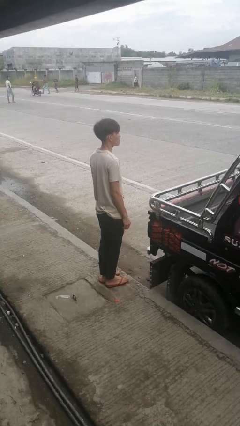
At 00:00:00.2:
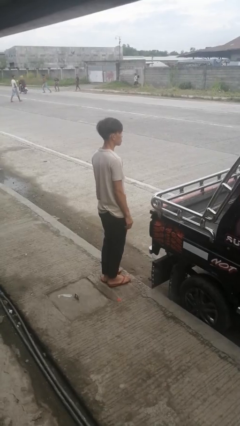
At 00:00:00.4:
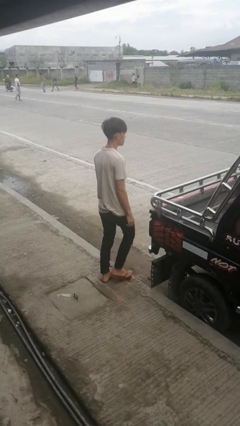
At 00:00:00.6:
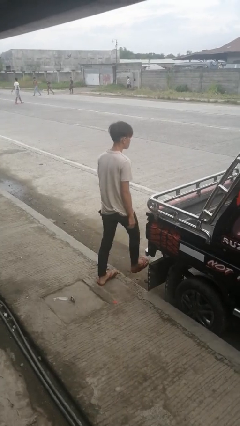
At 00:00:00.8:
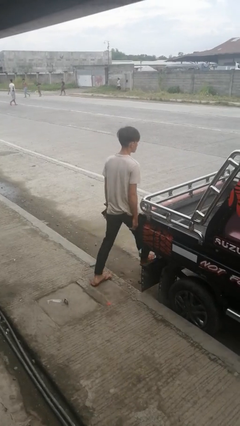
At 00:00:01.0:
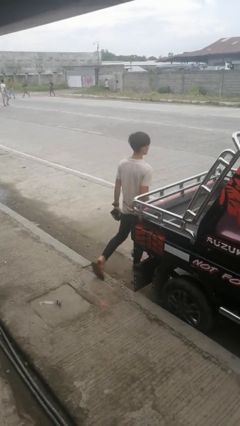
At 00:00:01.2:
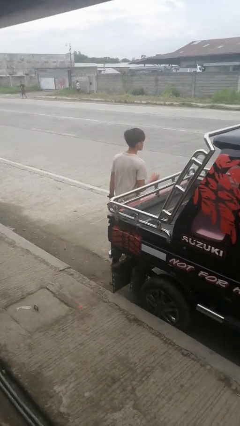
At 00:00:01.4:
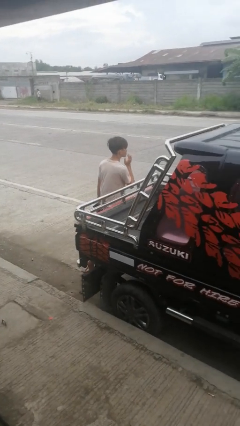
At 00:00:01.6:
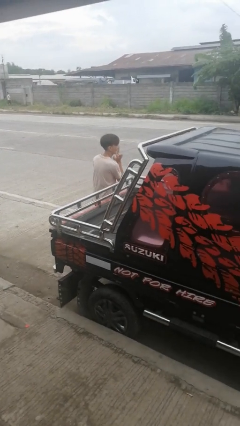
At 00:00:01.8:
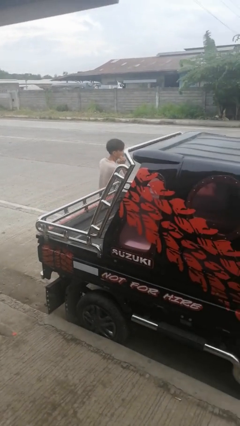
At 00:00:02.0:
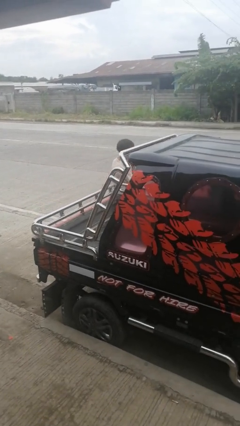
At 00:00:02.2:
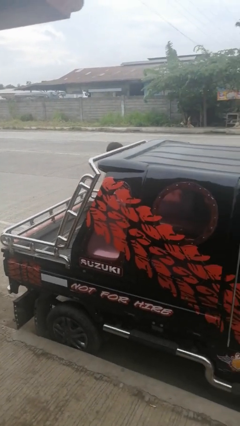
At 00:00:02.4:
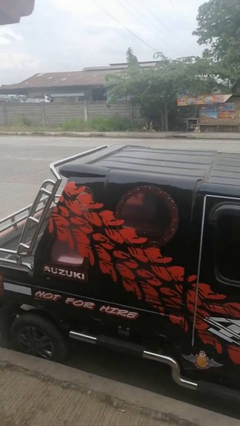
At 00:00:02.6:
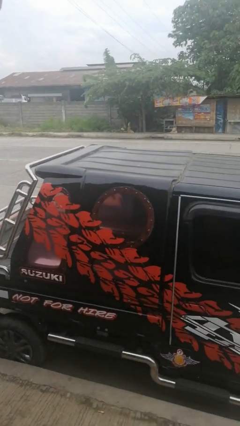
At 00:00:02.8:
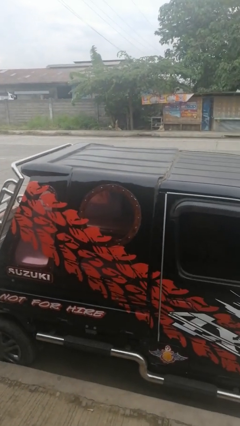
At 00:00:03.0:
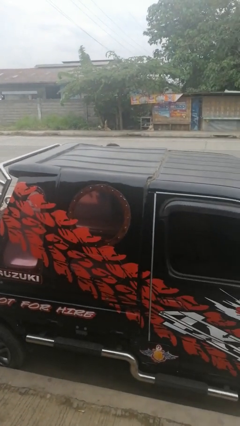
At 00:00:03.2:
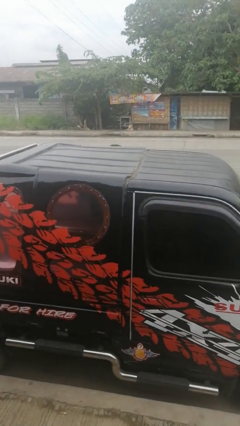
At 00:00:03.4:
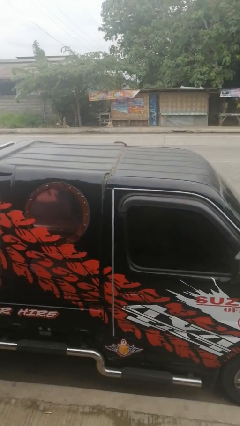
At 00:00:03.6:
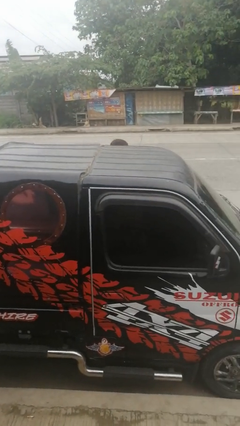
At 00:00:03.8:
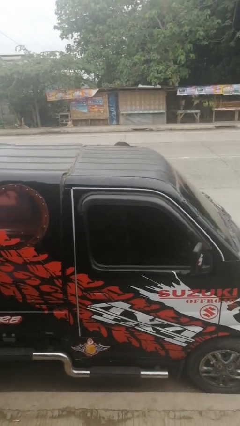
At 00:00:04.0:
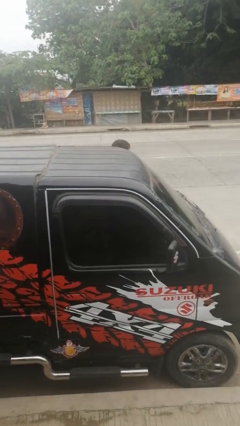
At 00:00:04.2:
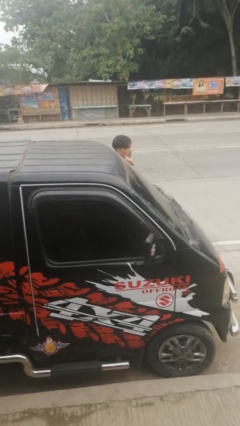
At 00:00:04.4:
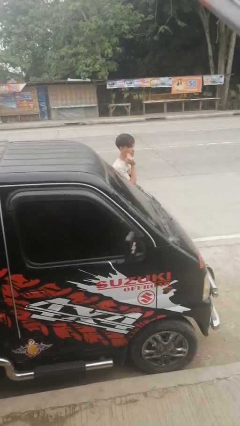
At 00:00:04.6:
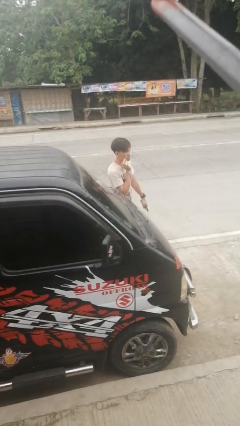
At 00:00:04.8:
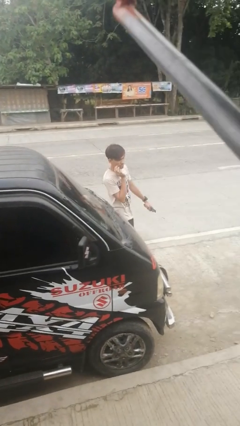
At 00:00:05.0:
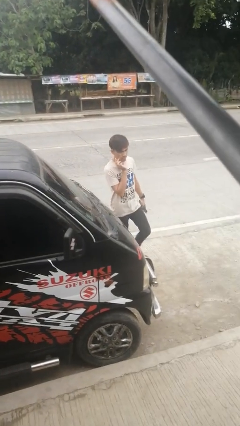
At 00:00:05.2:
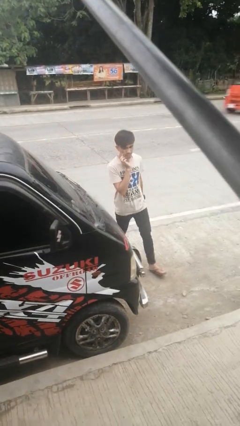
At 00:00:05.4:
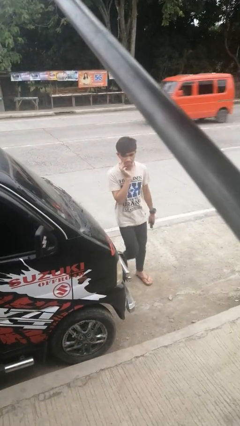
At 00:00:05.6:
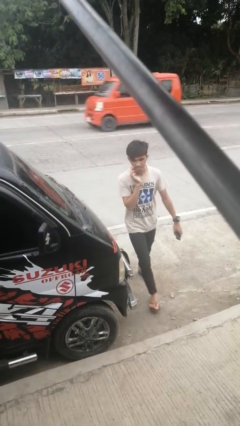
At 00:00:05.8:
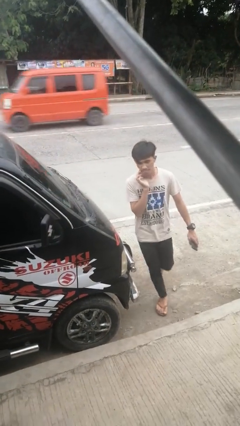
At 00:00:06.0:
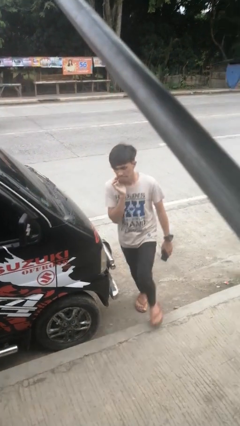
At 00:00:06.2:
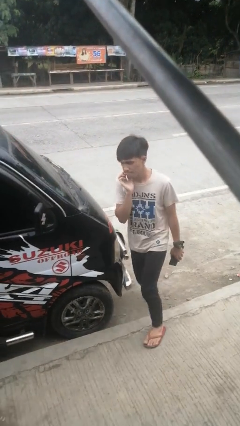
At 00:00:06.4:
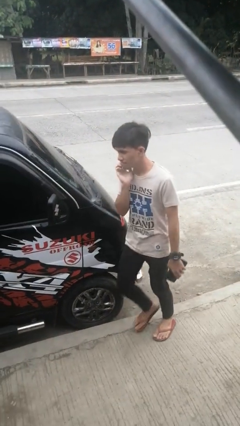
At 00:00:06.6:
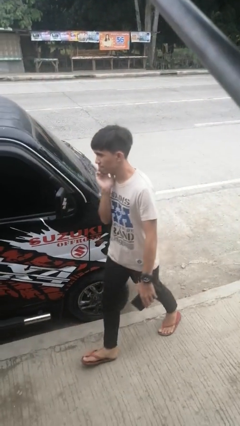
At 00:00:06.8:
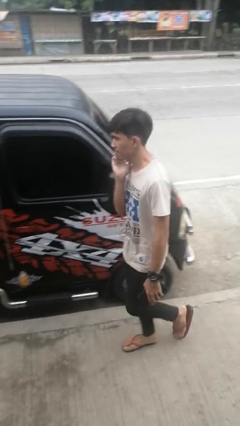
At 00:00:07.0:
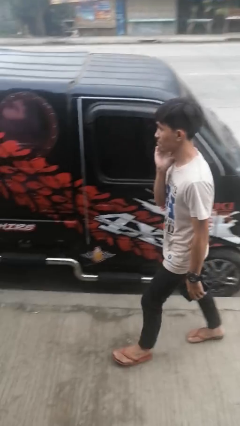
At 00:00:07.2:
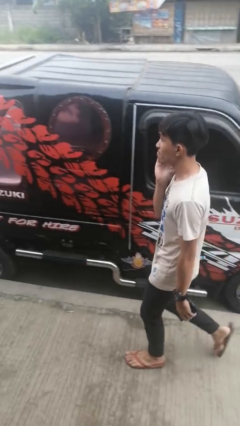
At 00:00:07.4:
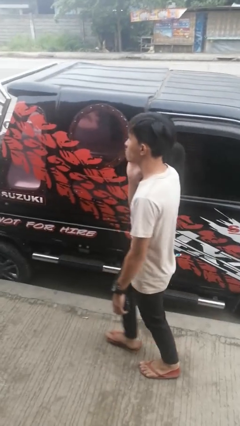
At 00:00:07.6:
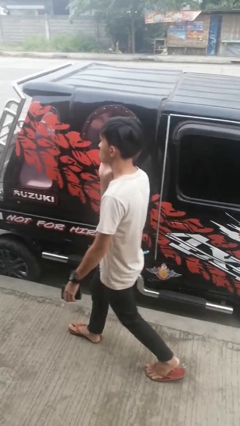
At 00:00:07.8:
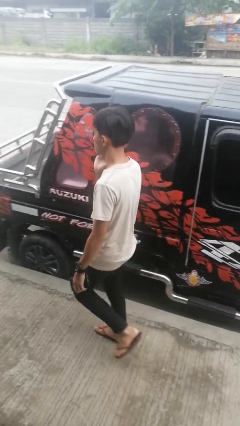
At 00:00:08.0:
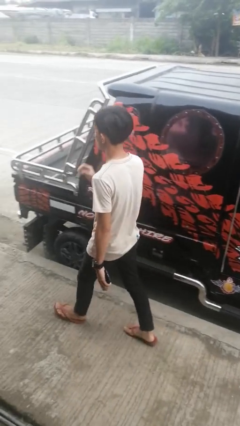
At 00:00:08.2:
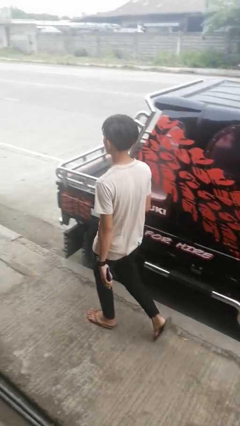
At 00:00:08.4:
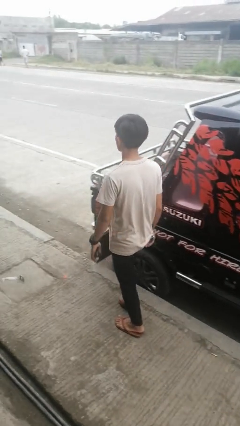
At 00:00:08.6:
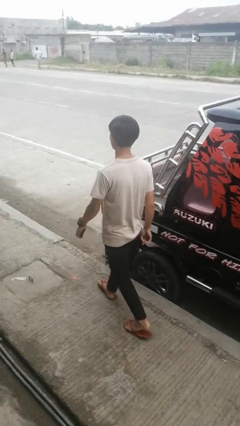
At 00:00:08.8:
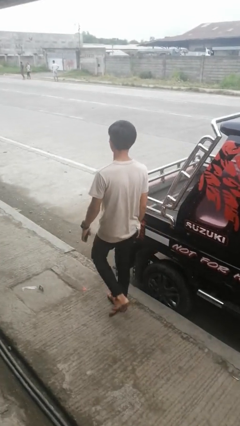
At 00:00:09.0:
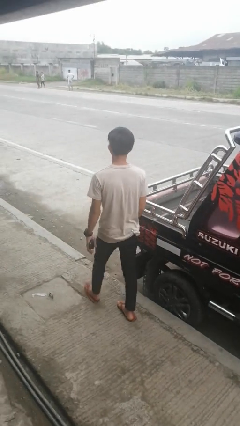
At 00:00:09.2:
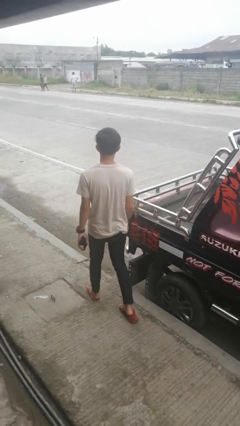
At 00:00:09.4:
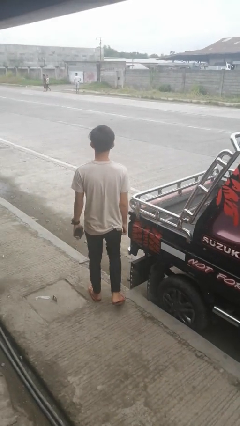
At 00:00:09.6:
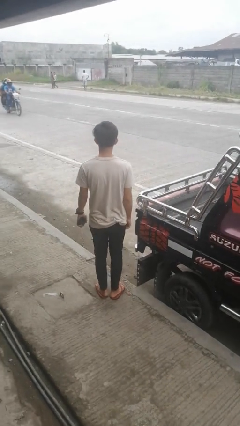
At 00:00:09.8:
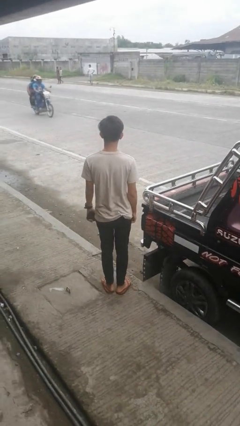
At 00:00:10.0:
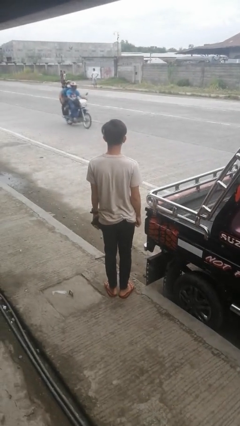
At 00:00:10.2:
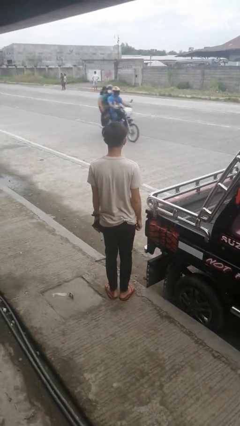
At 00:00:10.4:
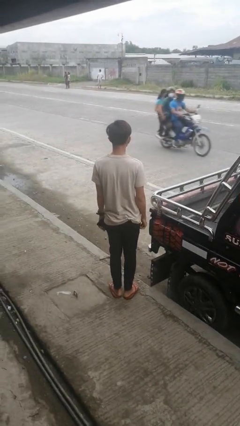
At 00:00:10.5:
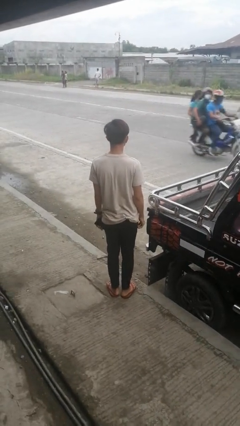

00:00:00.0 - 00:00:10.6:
person walks around car

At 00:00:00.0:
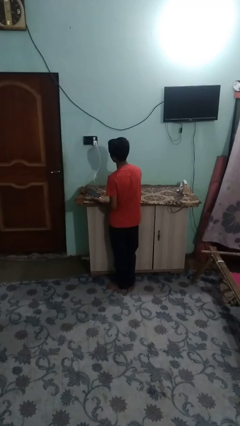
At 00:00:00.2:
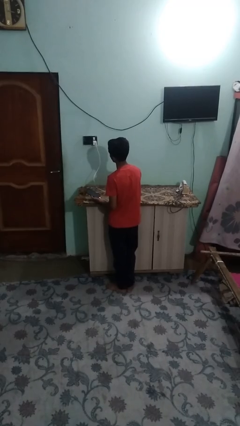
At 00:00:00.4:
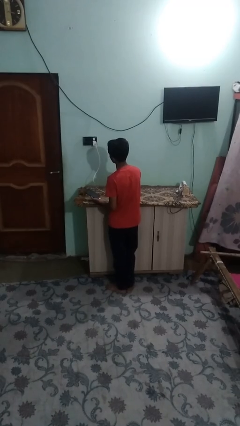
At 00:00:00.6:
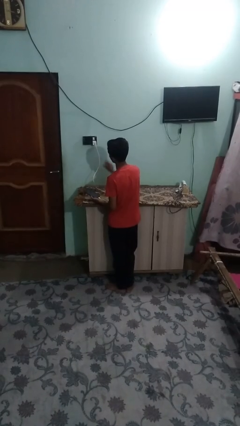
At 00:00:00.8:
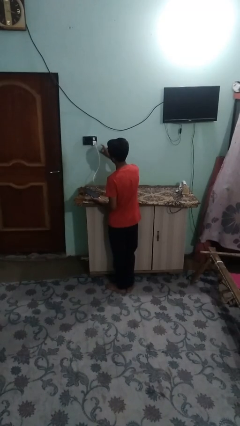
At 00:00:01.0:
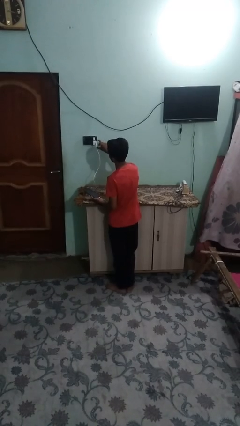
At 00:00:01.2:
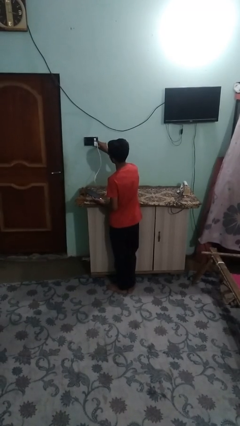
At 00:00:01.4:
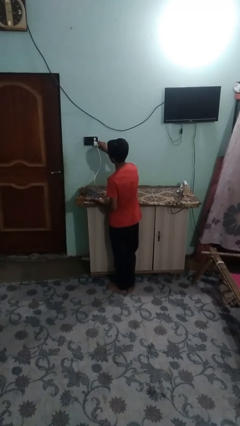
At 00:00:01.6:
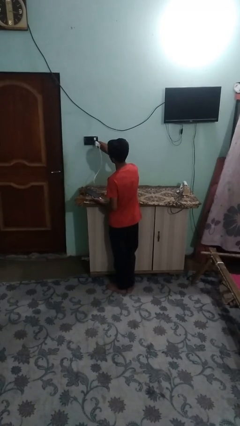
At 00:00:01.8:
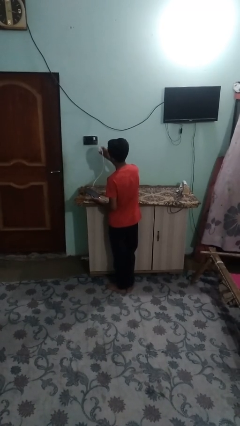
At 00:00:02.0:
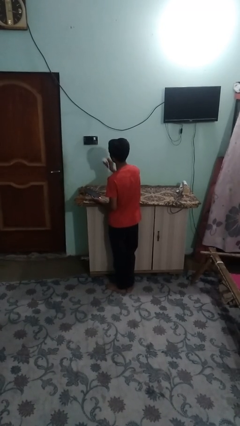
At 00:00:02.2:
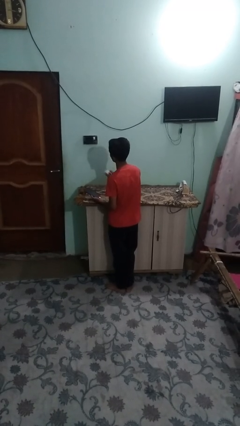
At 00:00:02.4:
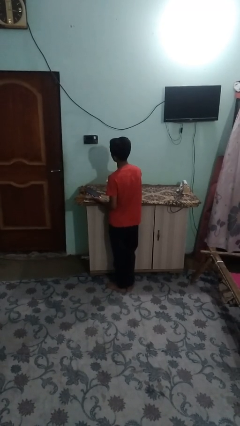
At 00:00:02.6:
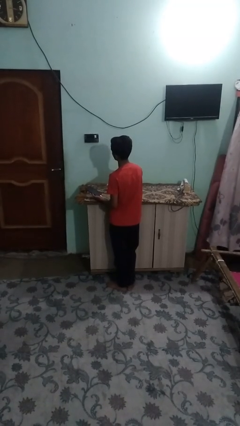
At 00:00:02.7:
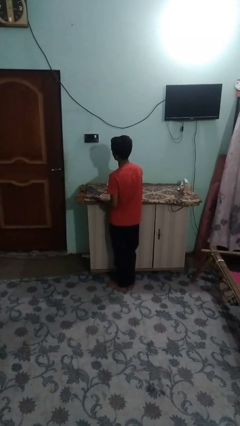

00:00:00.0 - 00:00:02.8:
person unplugs from electrical socket

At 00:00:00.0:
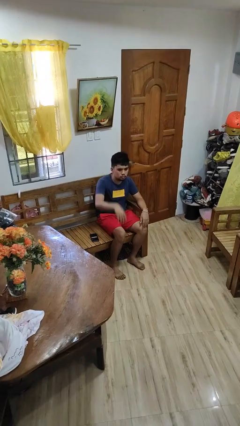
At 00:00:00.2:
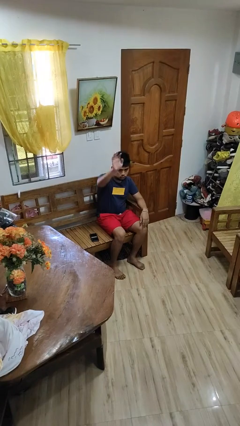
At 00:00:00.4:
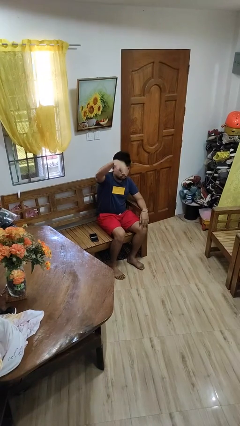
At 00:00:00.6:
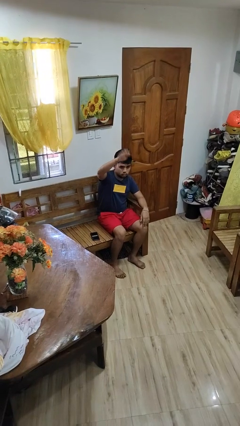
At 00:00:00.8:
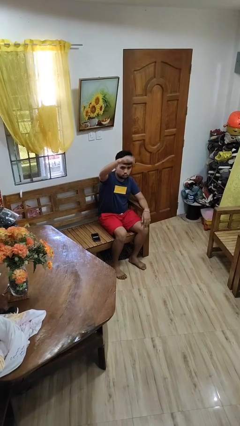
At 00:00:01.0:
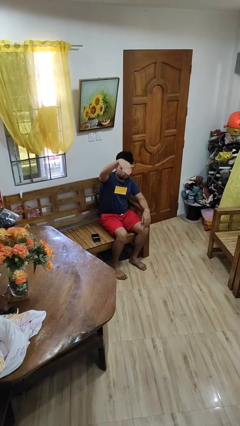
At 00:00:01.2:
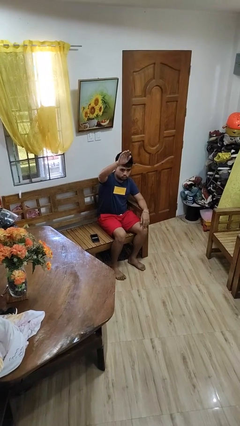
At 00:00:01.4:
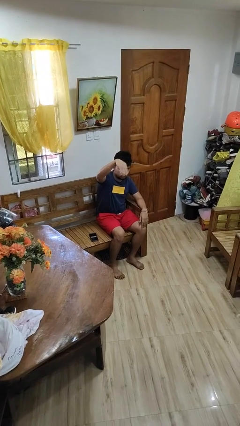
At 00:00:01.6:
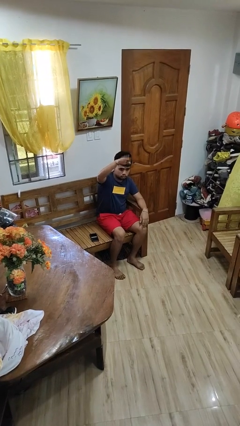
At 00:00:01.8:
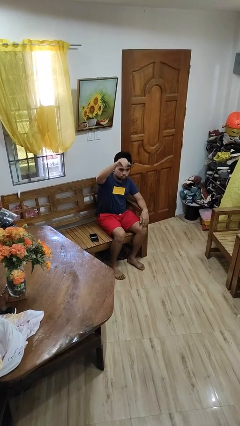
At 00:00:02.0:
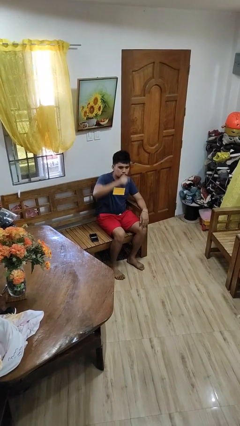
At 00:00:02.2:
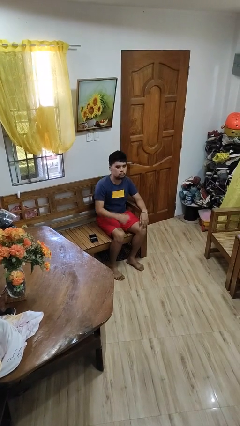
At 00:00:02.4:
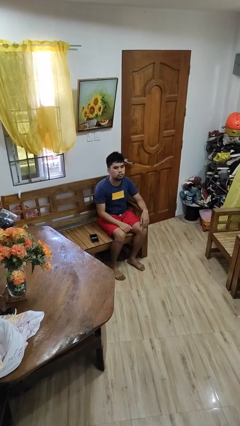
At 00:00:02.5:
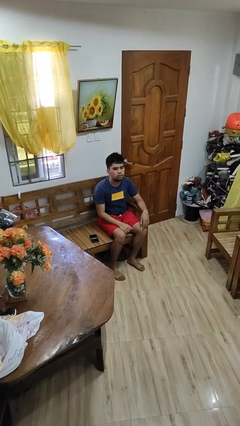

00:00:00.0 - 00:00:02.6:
person gestures come here

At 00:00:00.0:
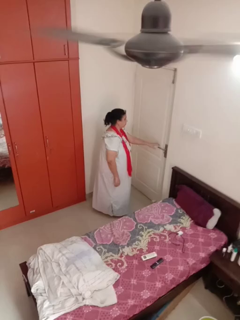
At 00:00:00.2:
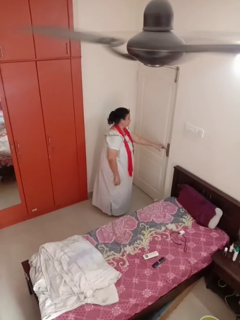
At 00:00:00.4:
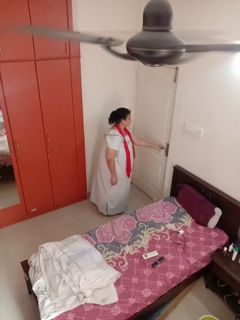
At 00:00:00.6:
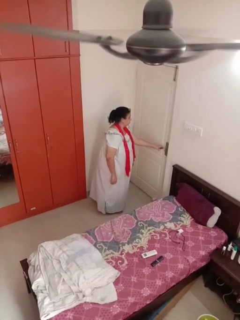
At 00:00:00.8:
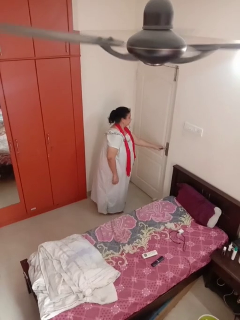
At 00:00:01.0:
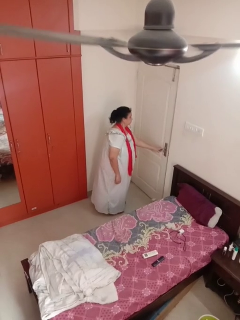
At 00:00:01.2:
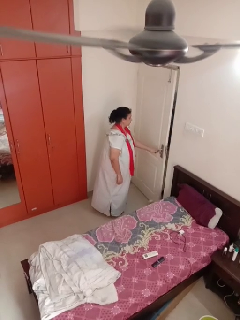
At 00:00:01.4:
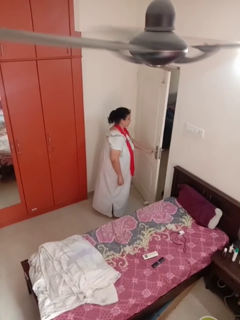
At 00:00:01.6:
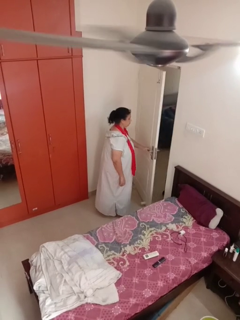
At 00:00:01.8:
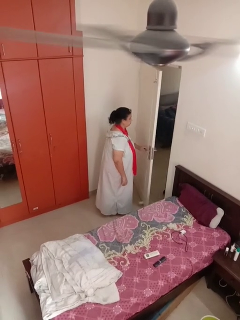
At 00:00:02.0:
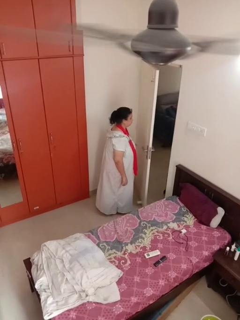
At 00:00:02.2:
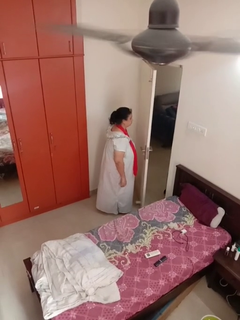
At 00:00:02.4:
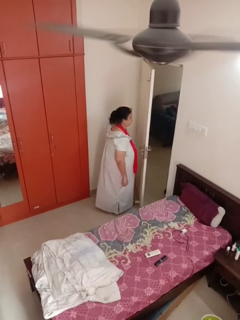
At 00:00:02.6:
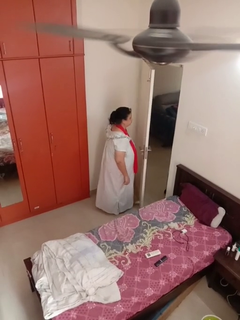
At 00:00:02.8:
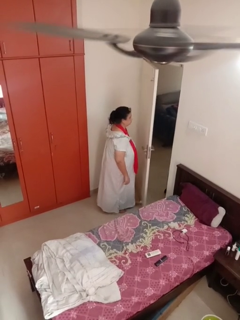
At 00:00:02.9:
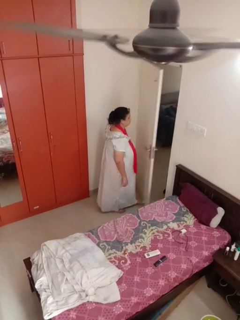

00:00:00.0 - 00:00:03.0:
person opens facility door
